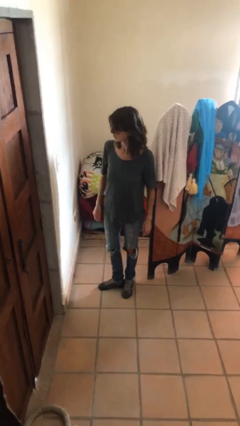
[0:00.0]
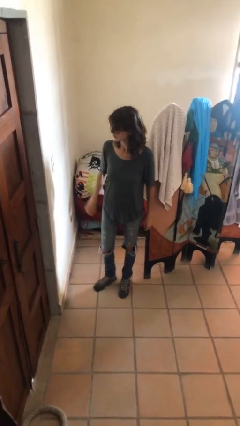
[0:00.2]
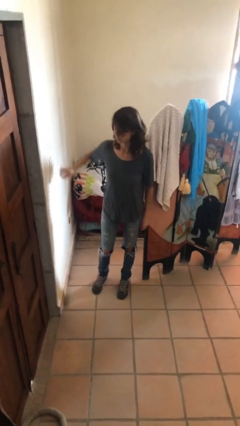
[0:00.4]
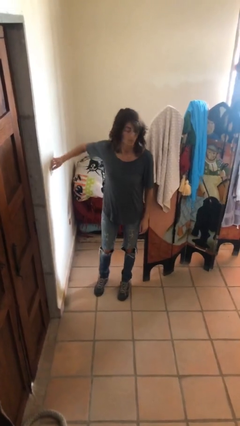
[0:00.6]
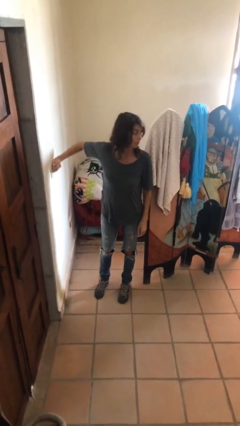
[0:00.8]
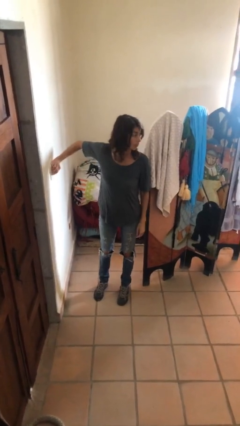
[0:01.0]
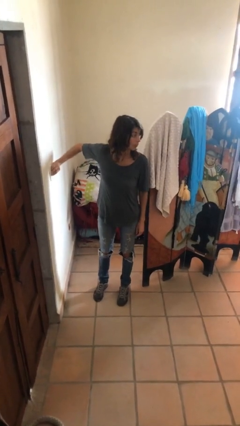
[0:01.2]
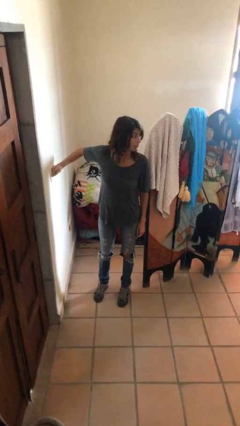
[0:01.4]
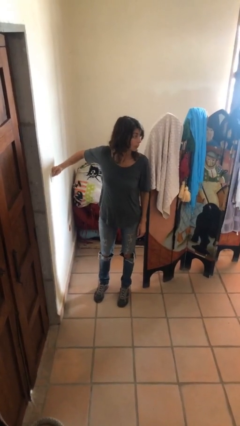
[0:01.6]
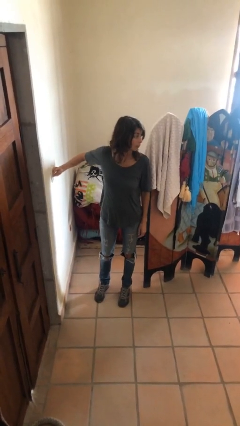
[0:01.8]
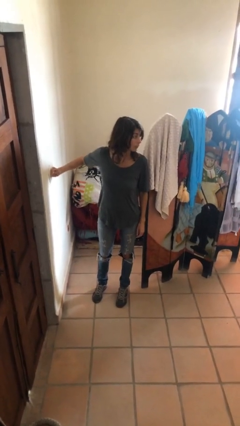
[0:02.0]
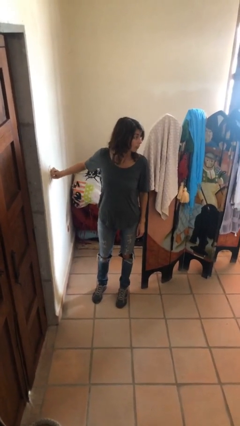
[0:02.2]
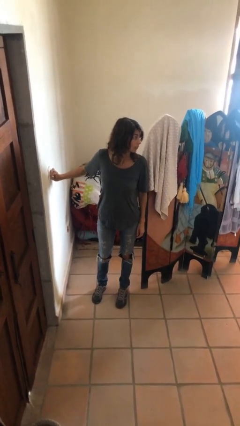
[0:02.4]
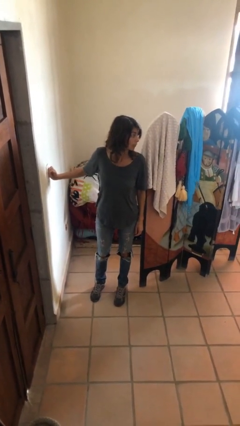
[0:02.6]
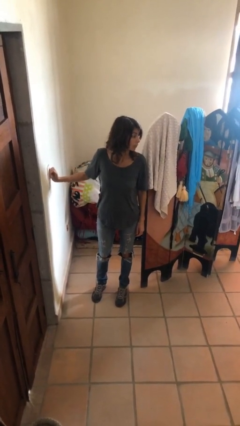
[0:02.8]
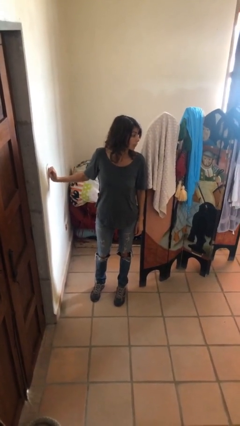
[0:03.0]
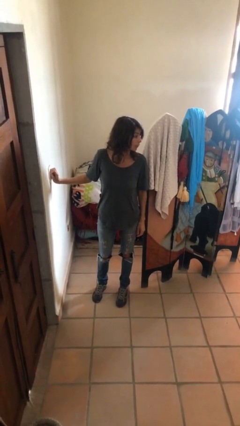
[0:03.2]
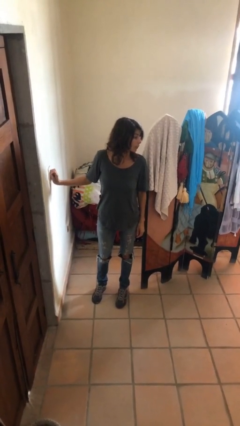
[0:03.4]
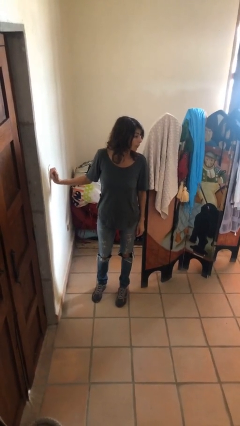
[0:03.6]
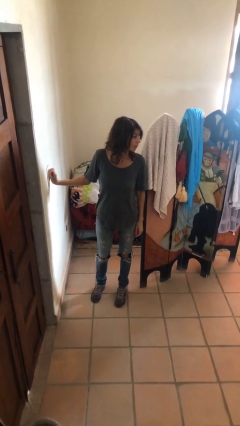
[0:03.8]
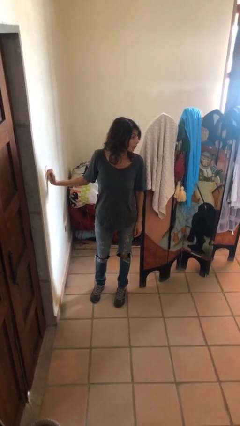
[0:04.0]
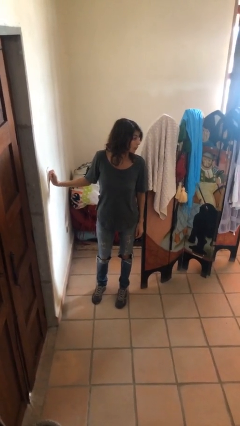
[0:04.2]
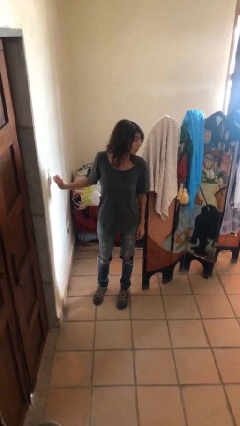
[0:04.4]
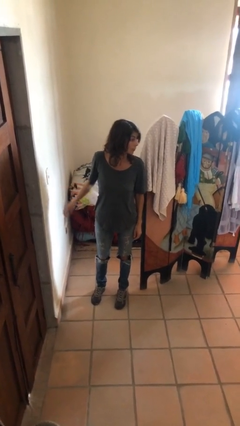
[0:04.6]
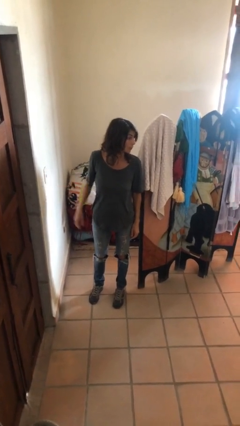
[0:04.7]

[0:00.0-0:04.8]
person adjusts thermostat

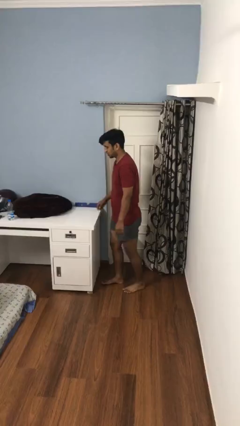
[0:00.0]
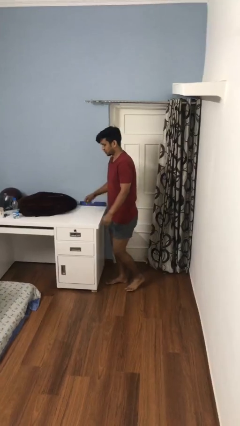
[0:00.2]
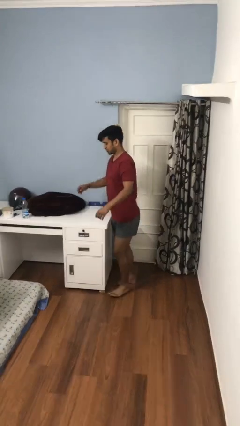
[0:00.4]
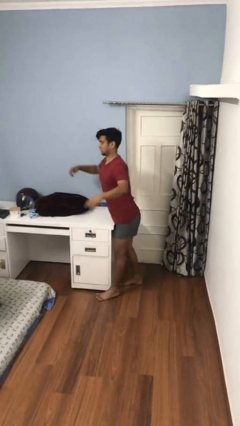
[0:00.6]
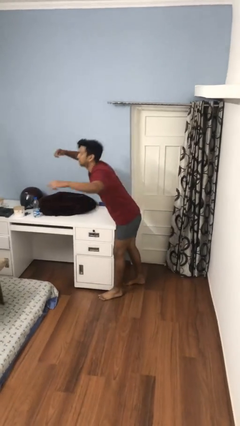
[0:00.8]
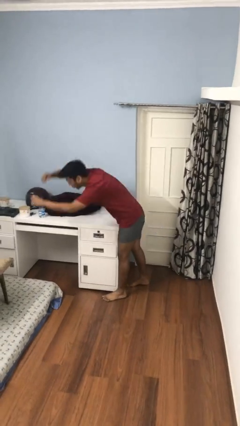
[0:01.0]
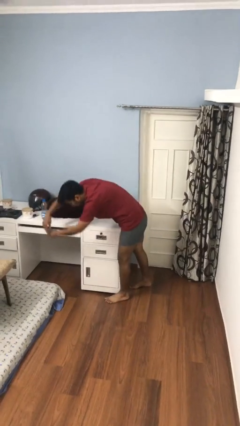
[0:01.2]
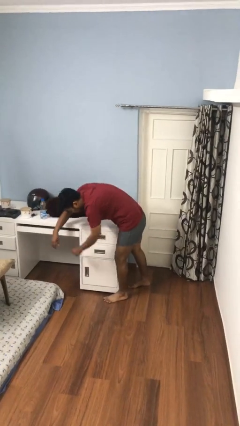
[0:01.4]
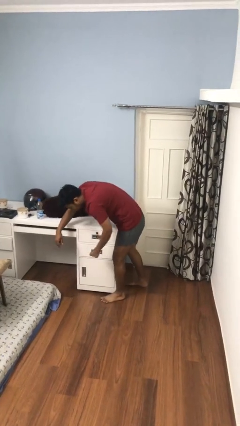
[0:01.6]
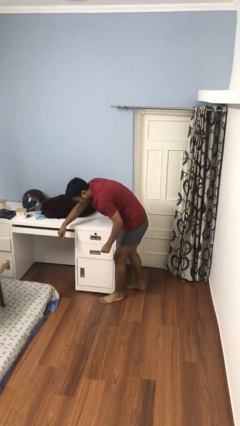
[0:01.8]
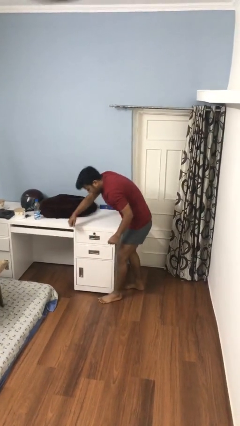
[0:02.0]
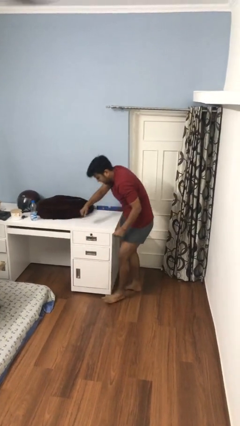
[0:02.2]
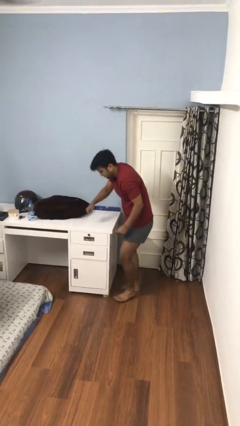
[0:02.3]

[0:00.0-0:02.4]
person bumps into table

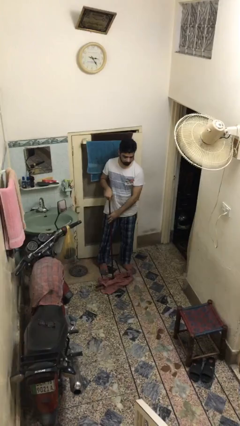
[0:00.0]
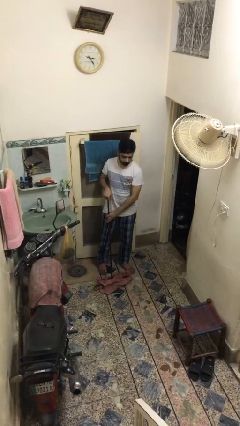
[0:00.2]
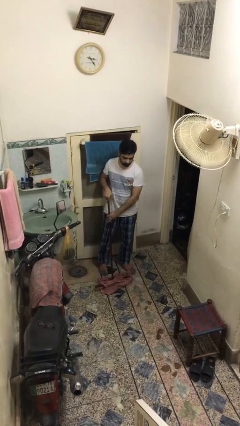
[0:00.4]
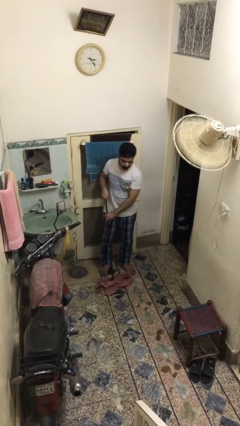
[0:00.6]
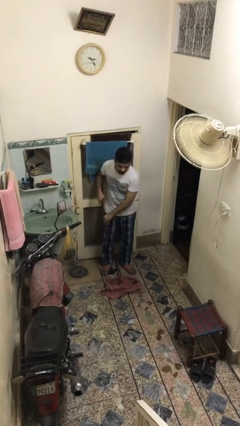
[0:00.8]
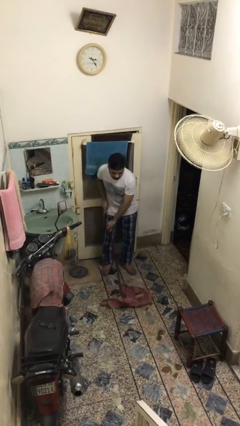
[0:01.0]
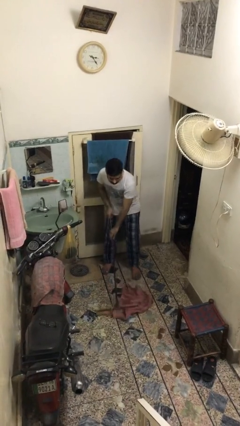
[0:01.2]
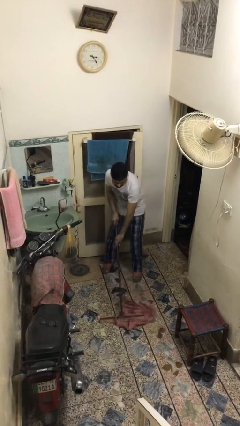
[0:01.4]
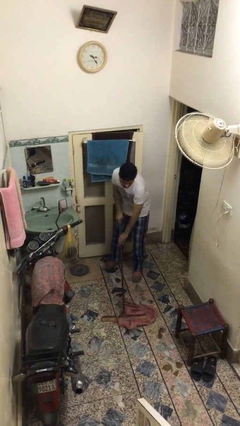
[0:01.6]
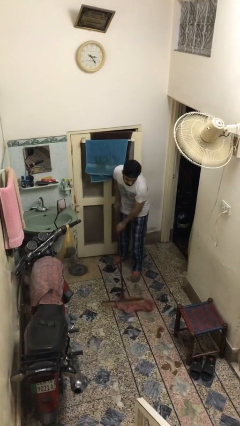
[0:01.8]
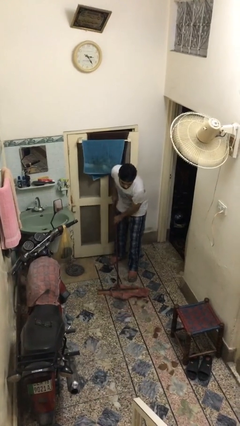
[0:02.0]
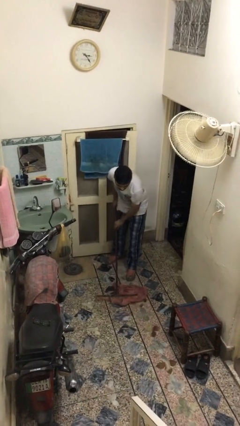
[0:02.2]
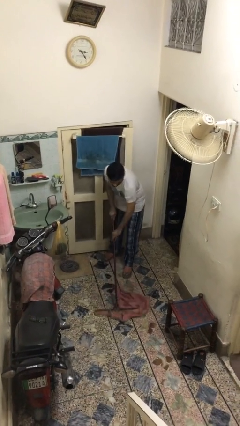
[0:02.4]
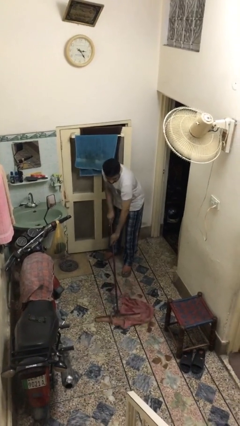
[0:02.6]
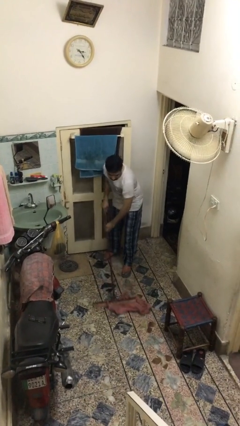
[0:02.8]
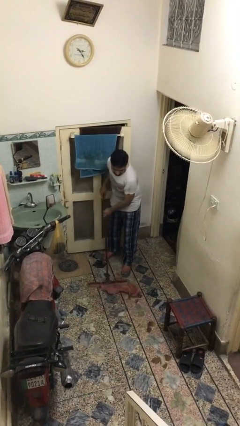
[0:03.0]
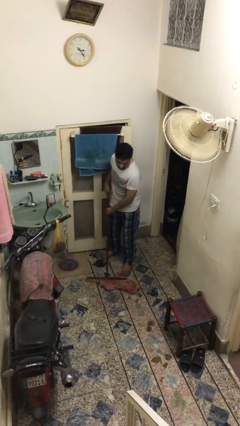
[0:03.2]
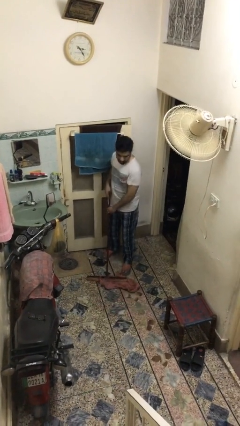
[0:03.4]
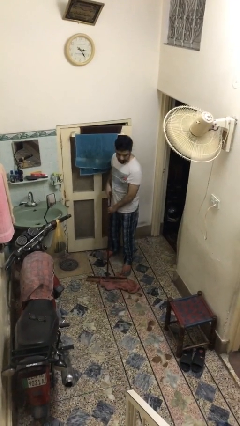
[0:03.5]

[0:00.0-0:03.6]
person mops

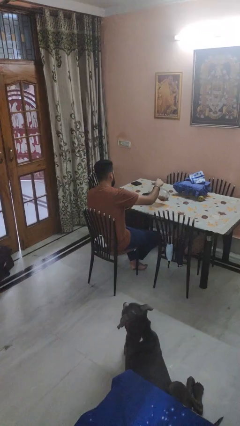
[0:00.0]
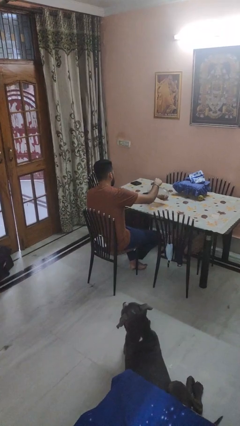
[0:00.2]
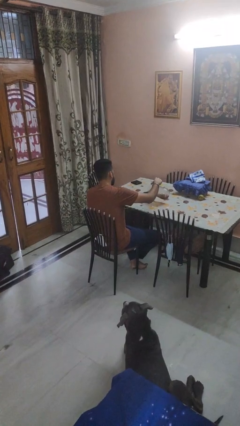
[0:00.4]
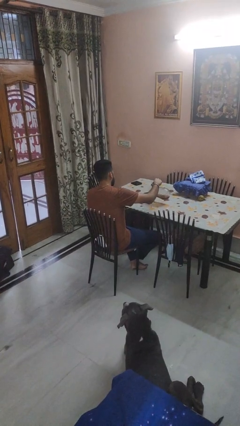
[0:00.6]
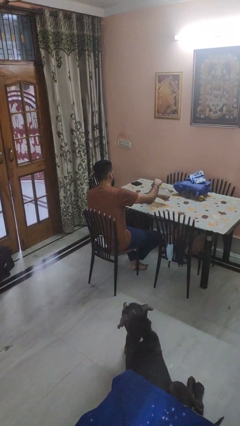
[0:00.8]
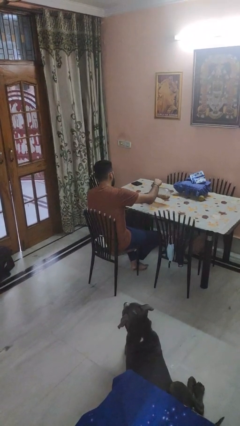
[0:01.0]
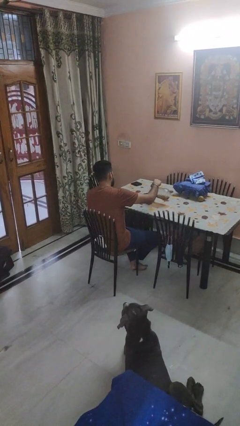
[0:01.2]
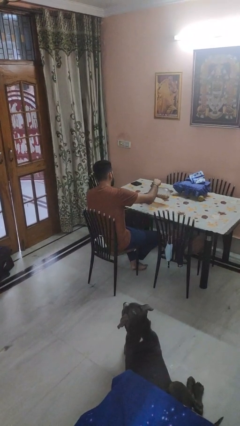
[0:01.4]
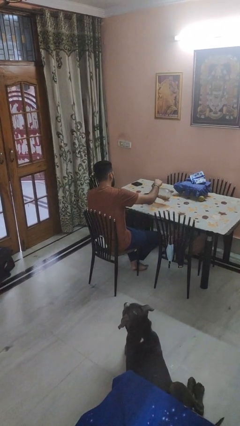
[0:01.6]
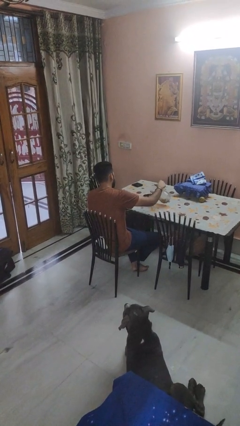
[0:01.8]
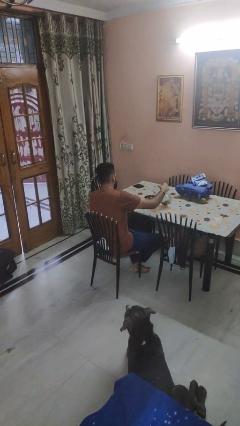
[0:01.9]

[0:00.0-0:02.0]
person pours into bowl

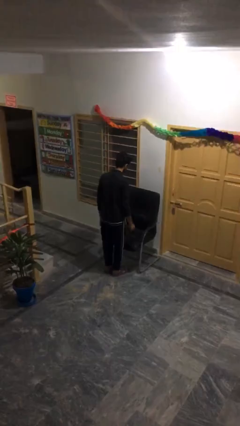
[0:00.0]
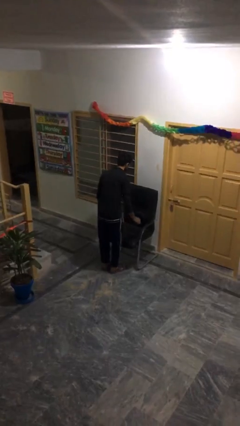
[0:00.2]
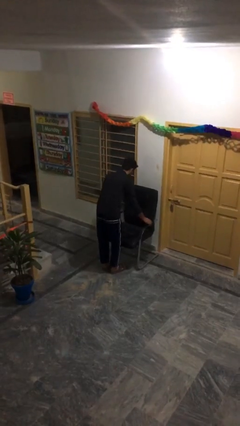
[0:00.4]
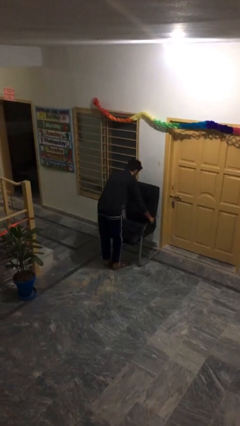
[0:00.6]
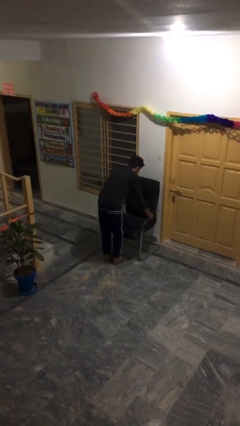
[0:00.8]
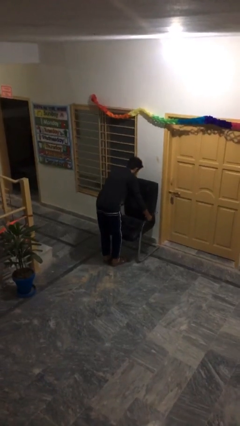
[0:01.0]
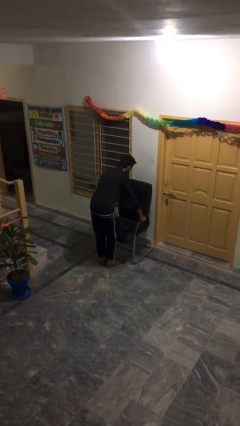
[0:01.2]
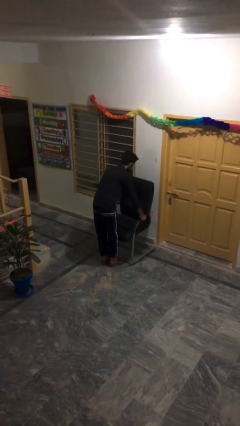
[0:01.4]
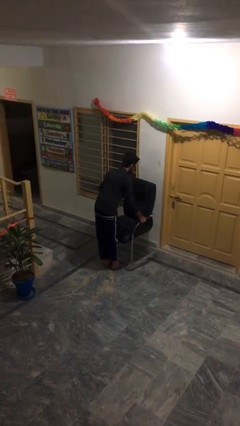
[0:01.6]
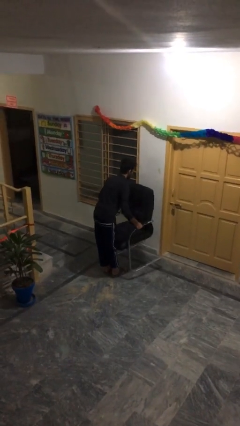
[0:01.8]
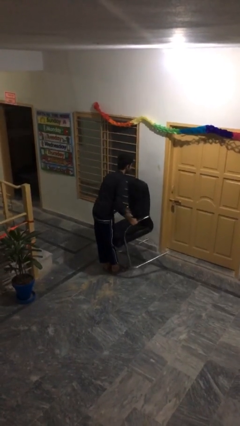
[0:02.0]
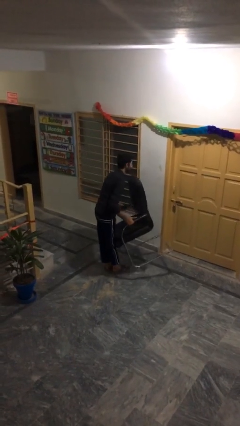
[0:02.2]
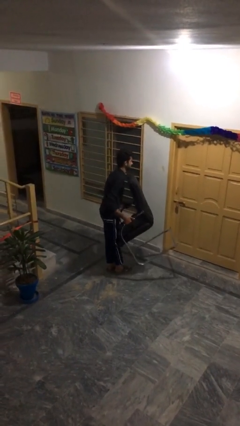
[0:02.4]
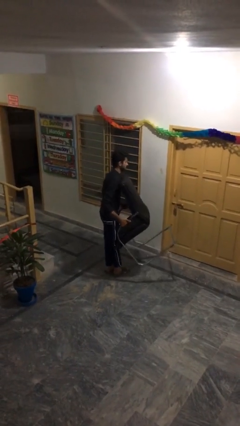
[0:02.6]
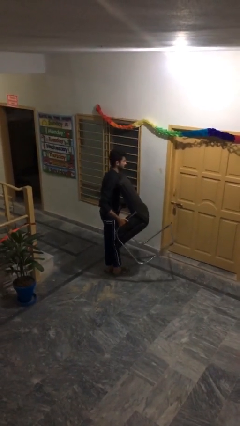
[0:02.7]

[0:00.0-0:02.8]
person picks up object from floor

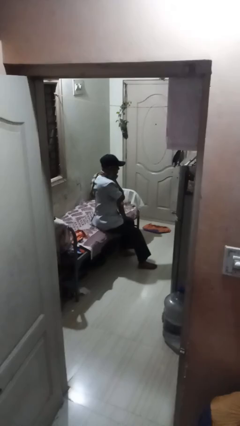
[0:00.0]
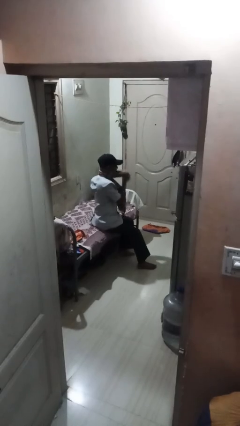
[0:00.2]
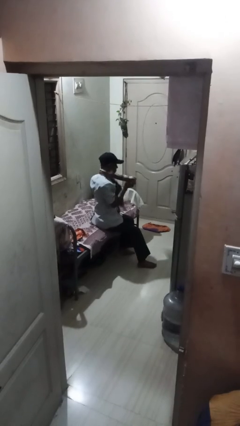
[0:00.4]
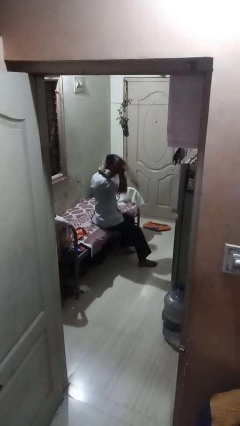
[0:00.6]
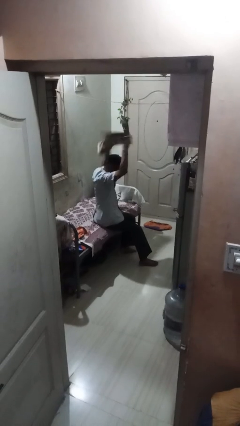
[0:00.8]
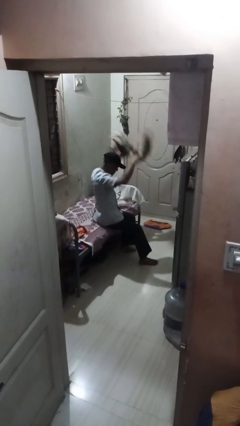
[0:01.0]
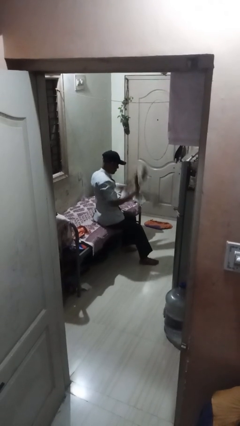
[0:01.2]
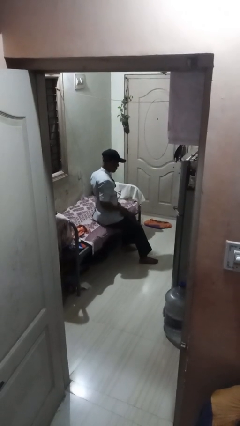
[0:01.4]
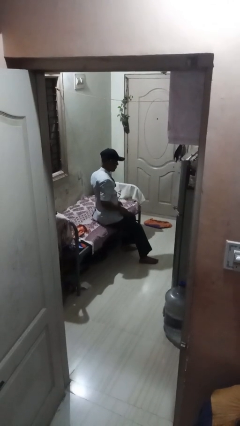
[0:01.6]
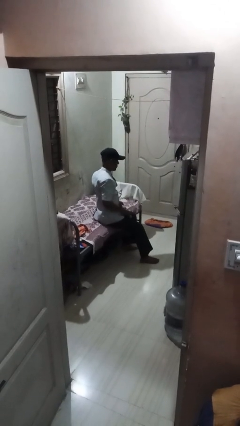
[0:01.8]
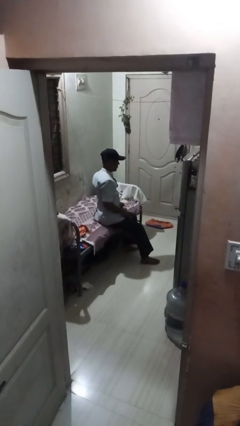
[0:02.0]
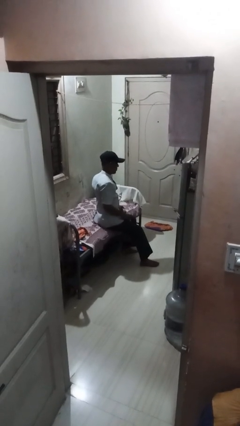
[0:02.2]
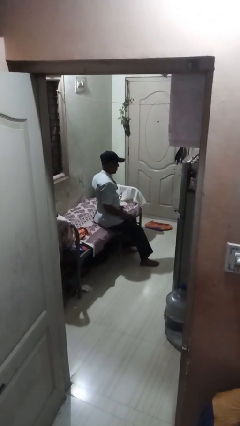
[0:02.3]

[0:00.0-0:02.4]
person takes off scarf
